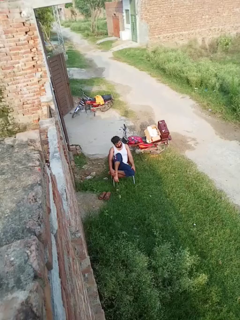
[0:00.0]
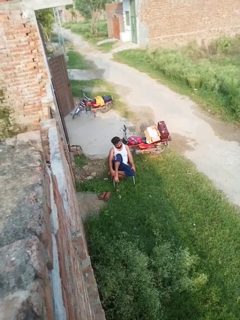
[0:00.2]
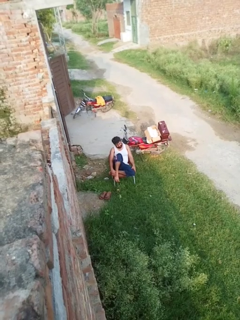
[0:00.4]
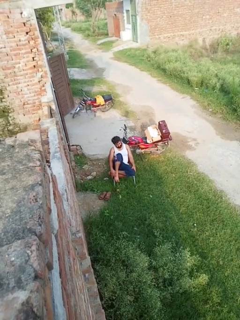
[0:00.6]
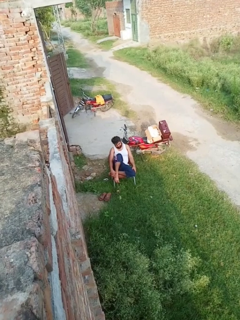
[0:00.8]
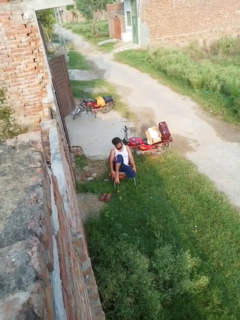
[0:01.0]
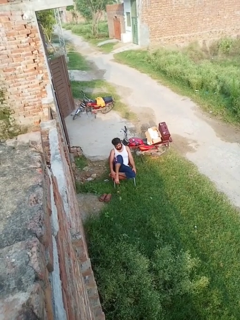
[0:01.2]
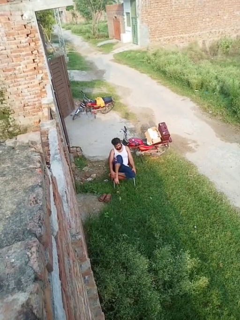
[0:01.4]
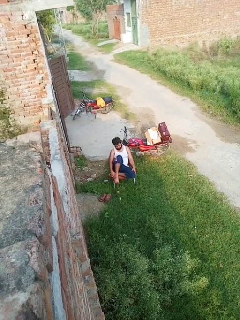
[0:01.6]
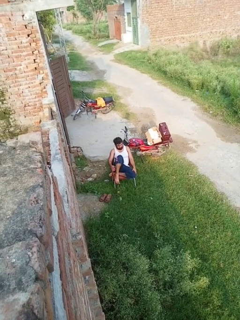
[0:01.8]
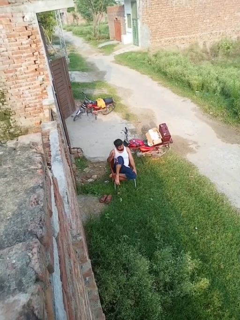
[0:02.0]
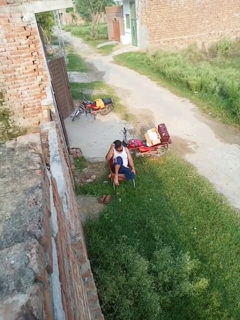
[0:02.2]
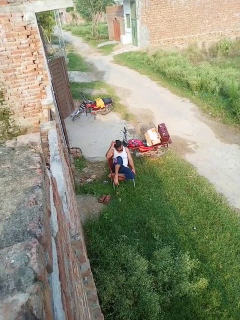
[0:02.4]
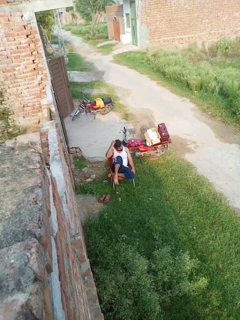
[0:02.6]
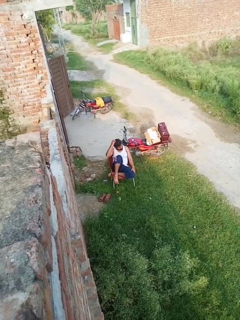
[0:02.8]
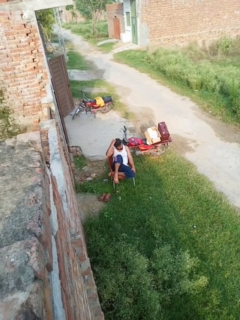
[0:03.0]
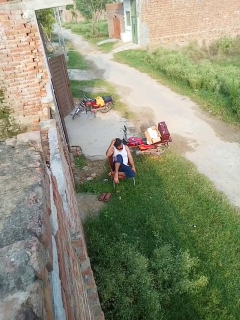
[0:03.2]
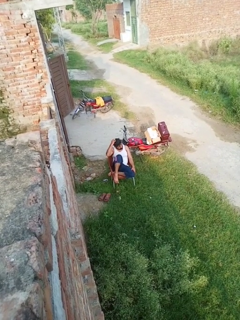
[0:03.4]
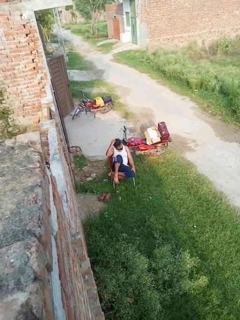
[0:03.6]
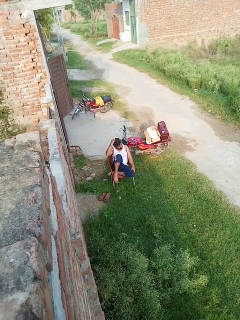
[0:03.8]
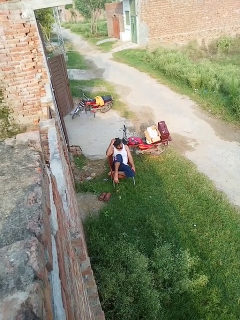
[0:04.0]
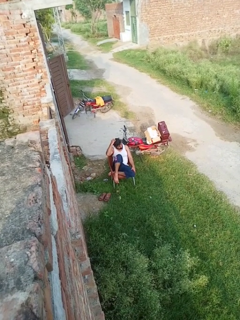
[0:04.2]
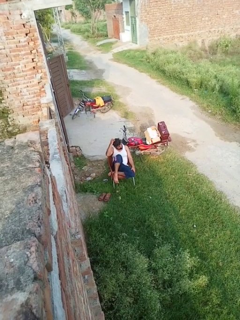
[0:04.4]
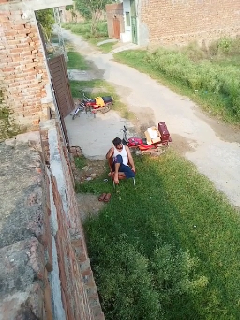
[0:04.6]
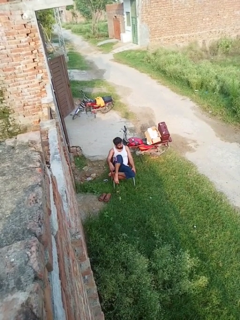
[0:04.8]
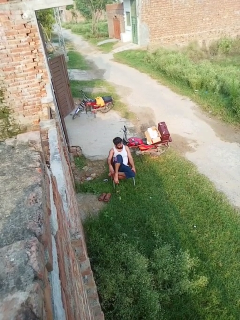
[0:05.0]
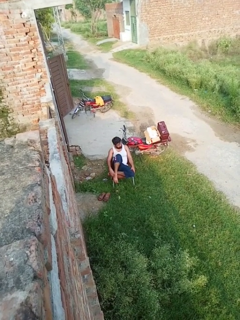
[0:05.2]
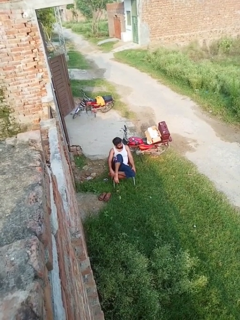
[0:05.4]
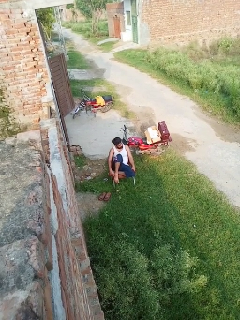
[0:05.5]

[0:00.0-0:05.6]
person scratches face

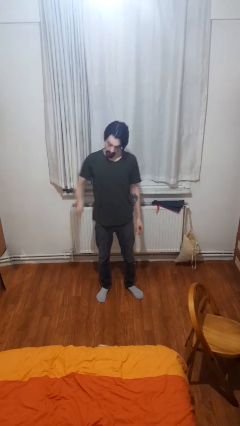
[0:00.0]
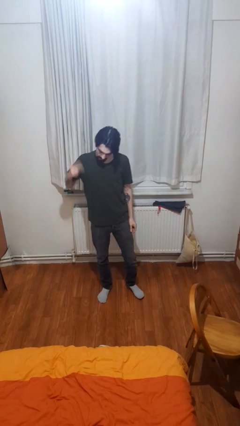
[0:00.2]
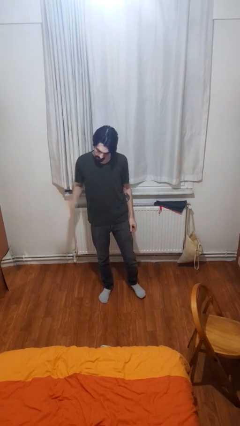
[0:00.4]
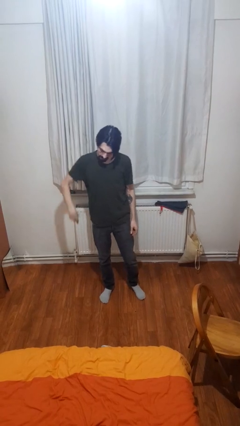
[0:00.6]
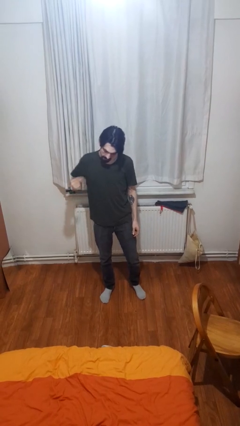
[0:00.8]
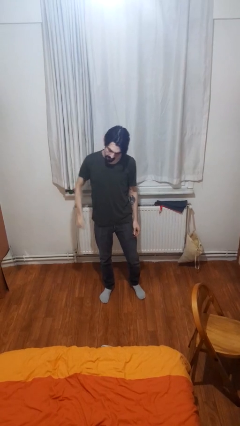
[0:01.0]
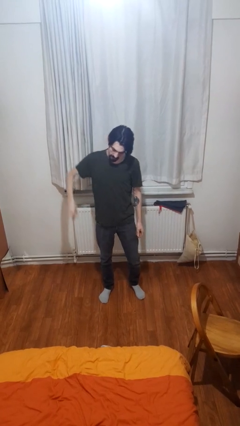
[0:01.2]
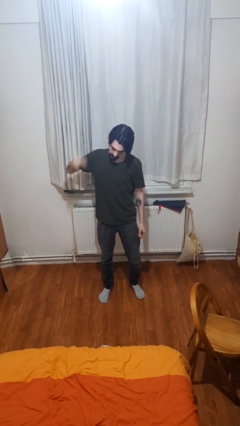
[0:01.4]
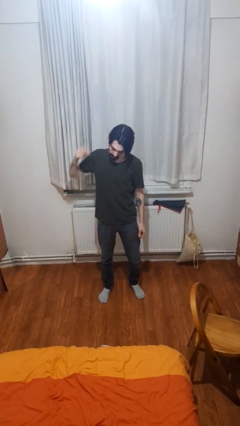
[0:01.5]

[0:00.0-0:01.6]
person snaps fingers

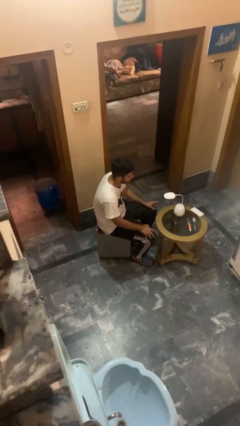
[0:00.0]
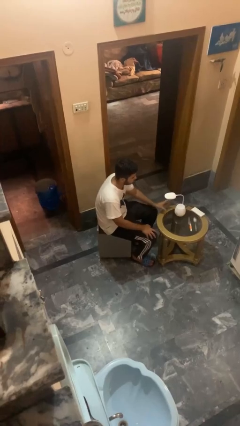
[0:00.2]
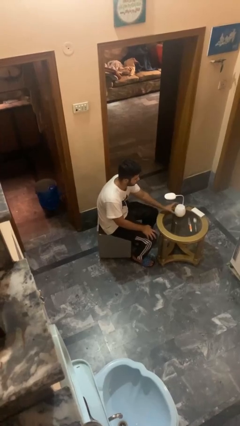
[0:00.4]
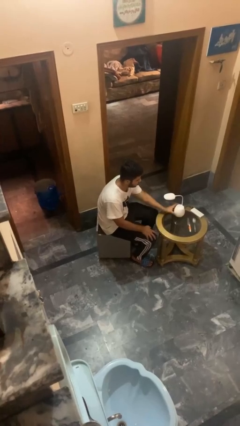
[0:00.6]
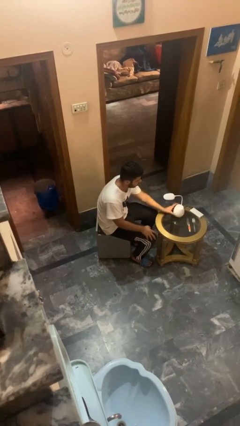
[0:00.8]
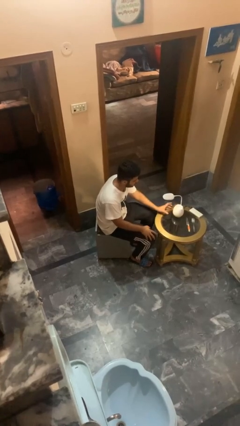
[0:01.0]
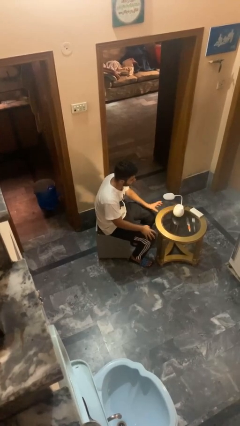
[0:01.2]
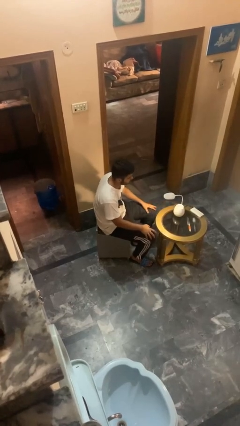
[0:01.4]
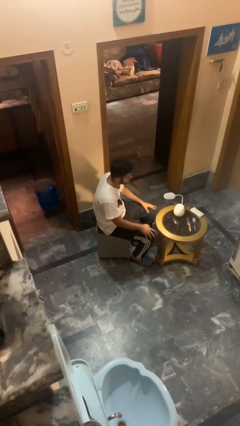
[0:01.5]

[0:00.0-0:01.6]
person turns on lamp

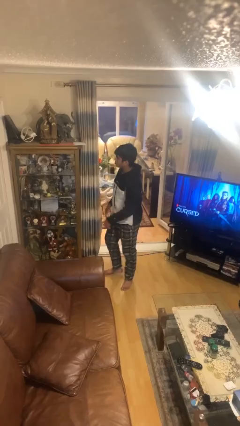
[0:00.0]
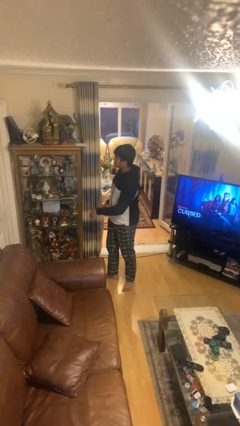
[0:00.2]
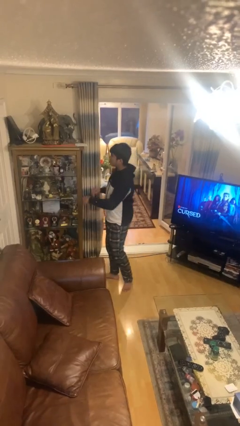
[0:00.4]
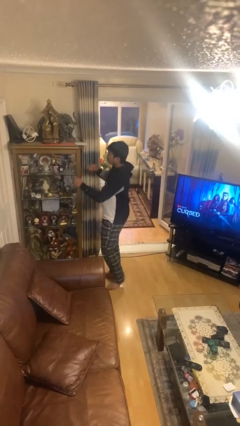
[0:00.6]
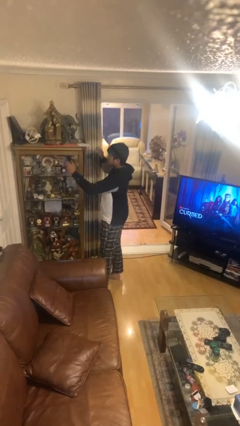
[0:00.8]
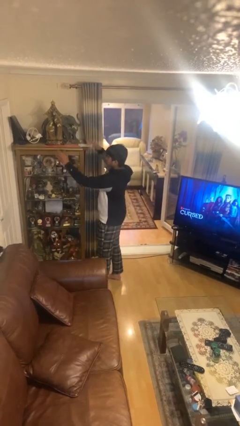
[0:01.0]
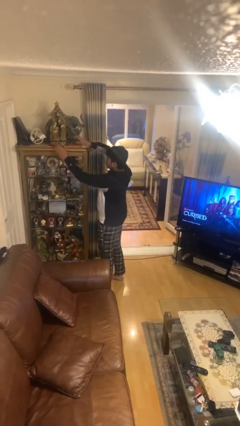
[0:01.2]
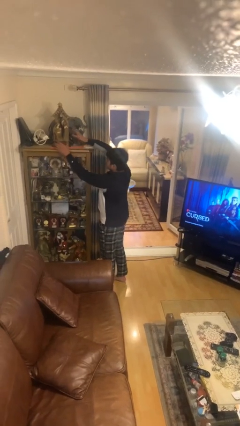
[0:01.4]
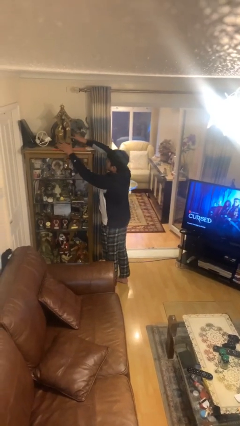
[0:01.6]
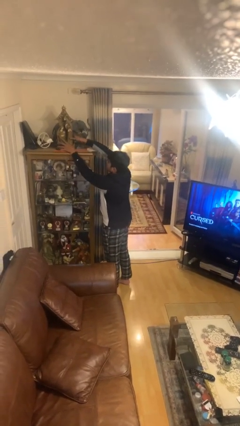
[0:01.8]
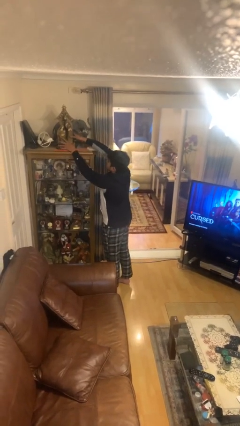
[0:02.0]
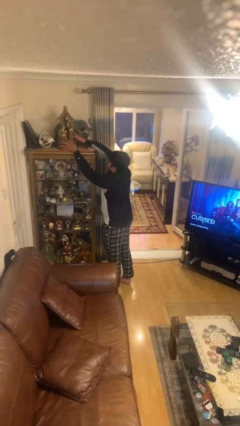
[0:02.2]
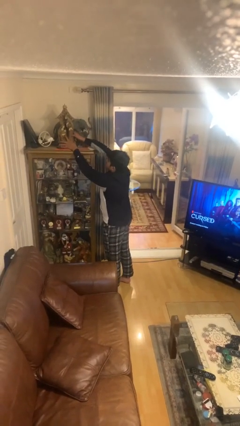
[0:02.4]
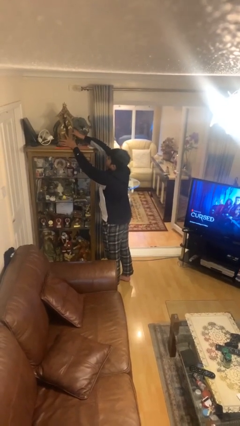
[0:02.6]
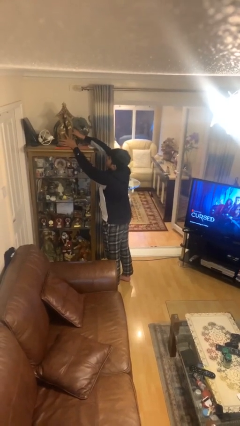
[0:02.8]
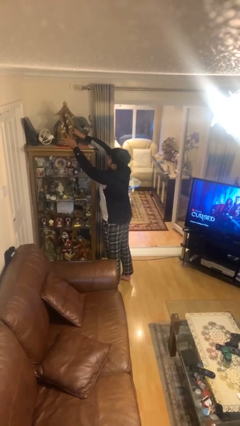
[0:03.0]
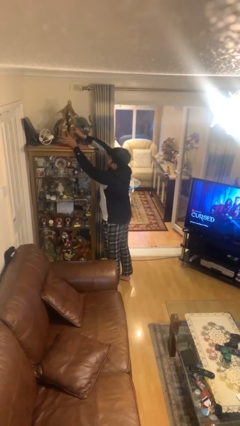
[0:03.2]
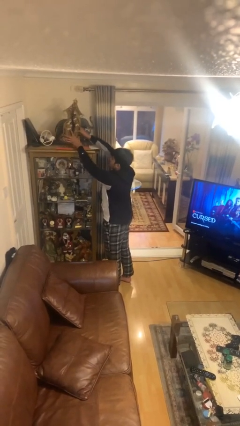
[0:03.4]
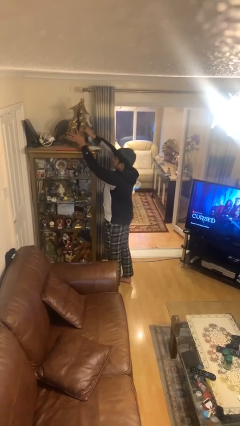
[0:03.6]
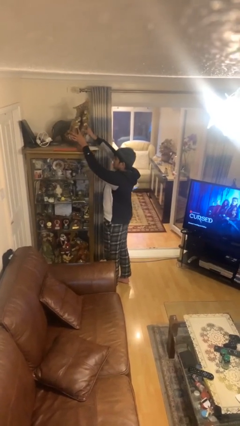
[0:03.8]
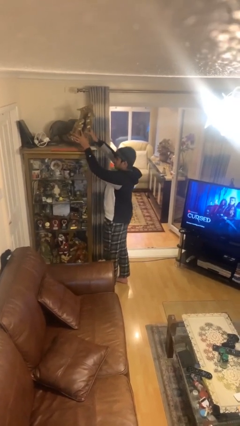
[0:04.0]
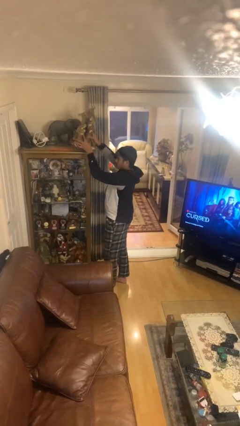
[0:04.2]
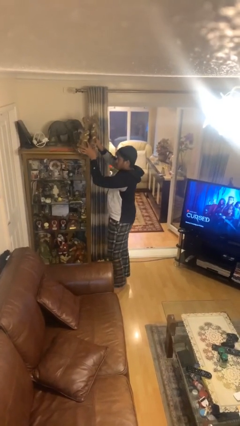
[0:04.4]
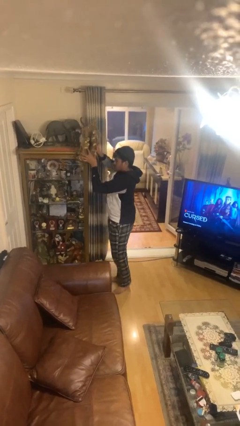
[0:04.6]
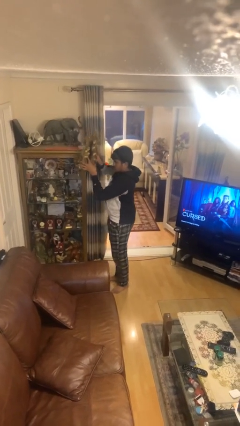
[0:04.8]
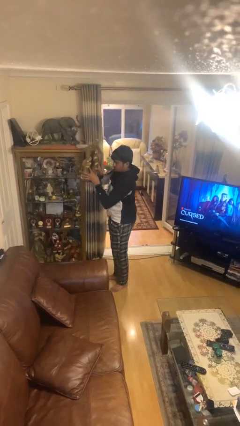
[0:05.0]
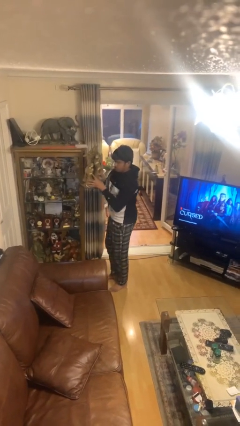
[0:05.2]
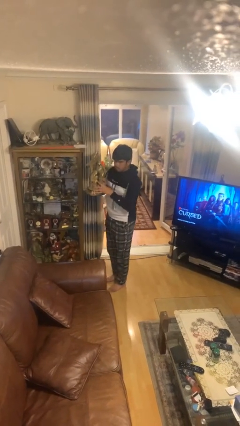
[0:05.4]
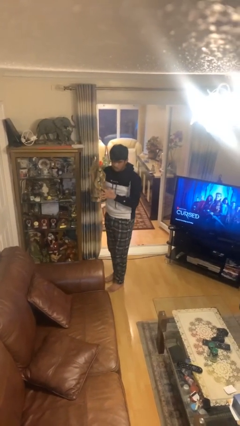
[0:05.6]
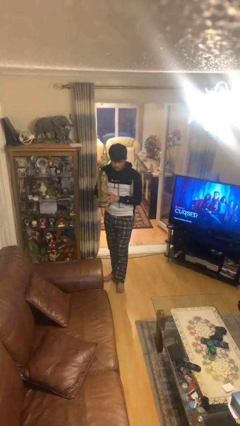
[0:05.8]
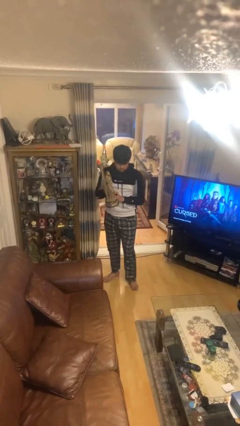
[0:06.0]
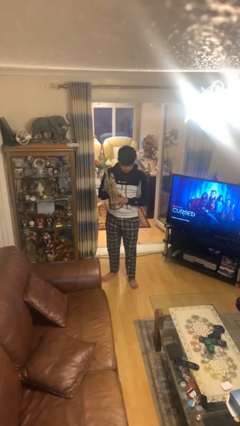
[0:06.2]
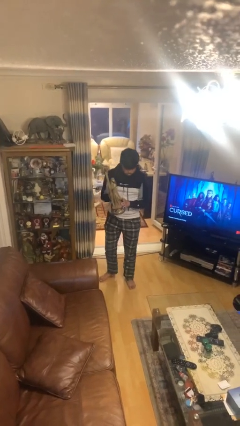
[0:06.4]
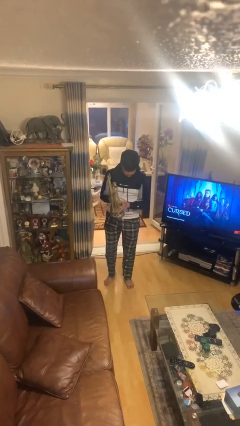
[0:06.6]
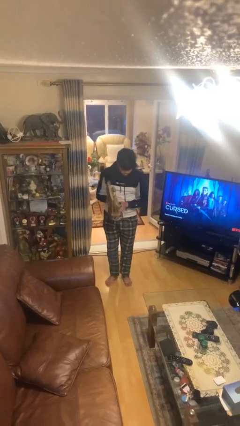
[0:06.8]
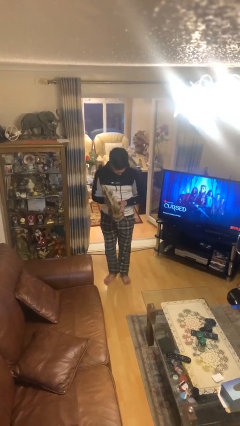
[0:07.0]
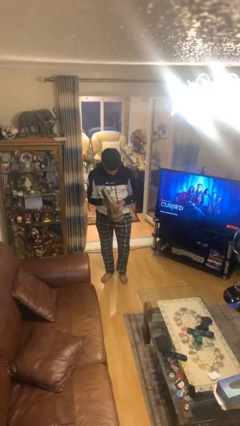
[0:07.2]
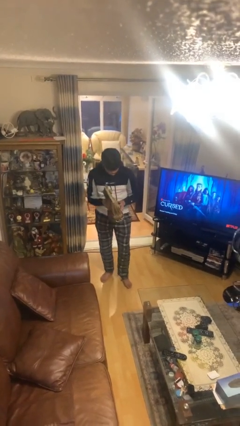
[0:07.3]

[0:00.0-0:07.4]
person picks up object from shelf

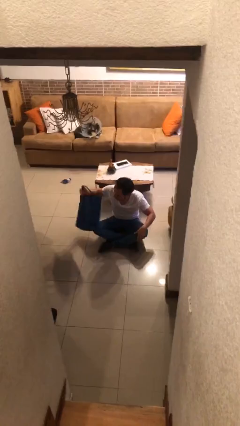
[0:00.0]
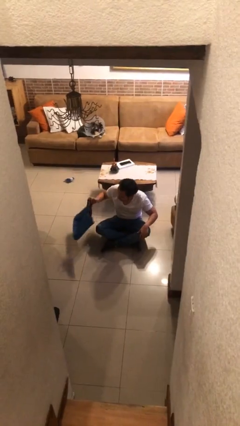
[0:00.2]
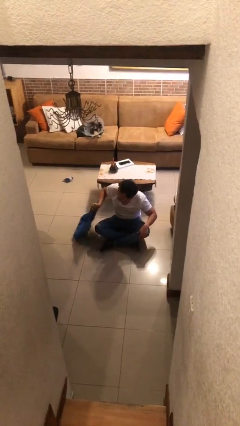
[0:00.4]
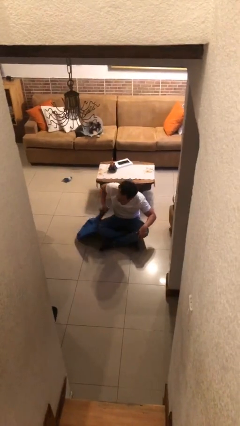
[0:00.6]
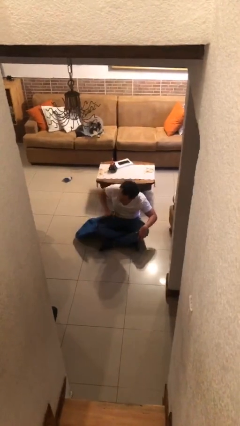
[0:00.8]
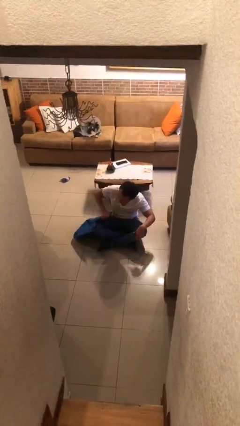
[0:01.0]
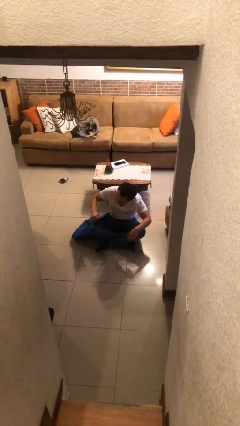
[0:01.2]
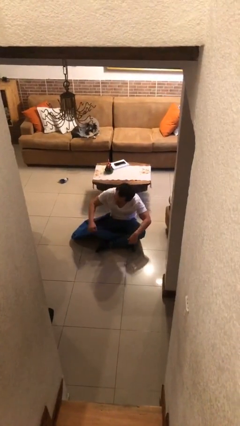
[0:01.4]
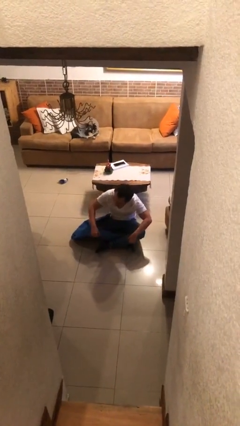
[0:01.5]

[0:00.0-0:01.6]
person puts down object on floor

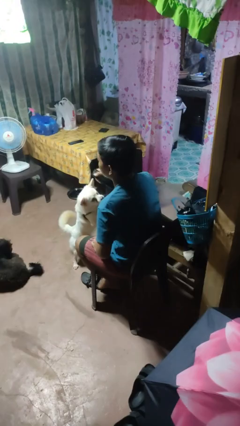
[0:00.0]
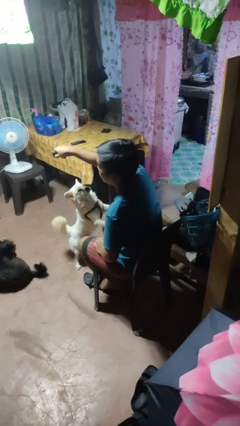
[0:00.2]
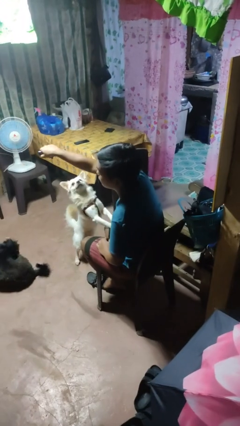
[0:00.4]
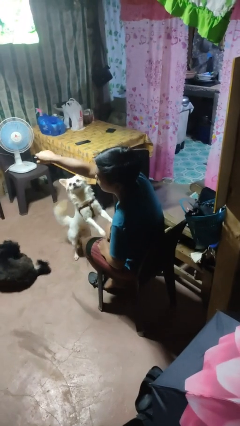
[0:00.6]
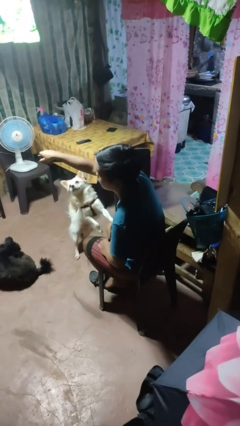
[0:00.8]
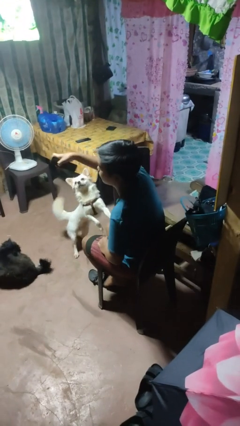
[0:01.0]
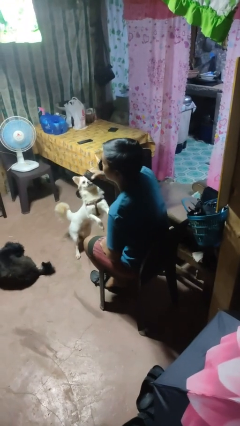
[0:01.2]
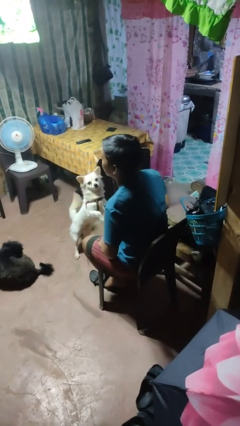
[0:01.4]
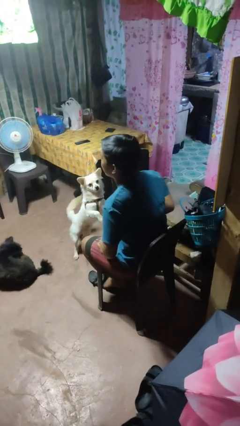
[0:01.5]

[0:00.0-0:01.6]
person uses television remote
